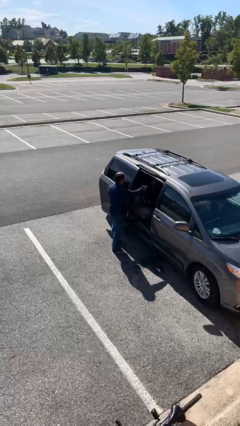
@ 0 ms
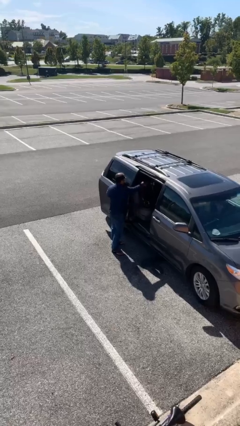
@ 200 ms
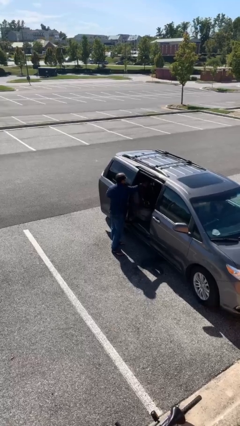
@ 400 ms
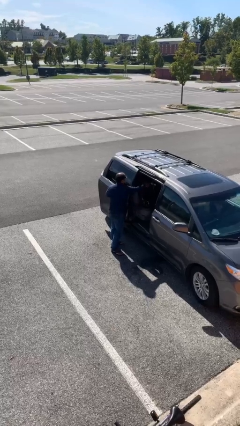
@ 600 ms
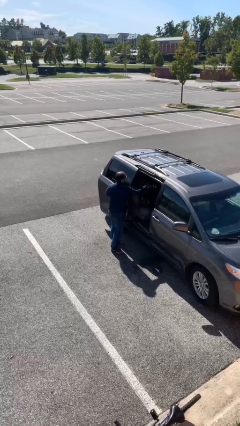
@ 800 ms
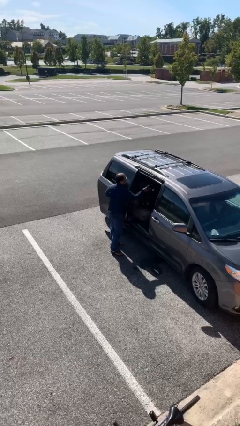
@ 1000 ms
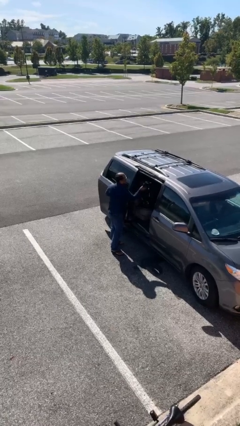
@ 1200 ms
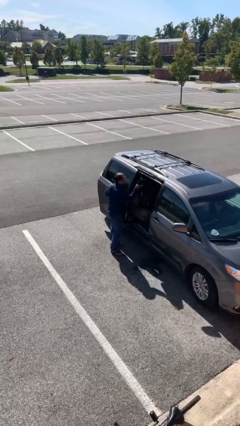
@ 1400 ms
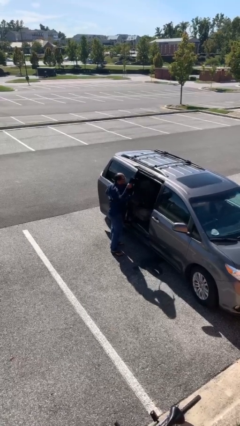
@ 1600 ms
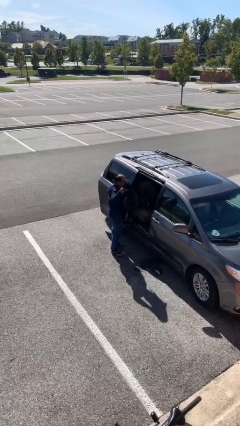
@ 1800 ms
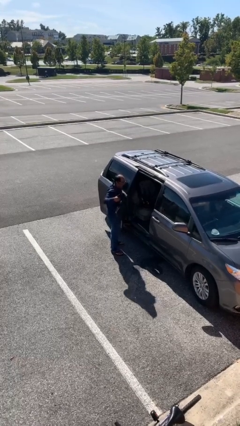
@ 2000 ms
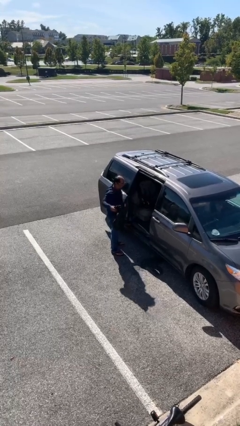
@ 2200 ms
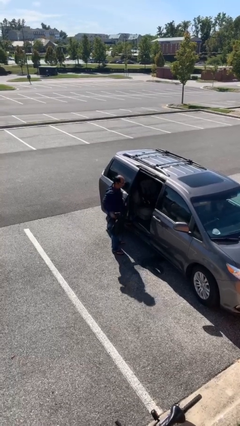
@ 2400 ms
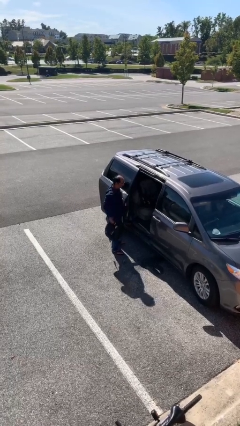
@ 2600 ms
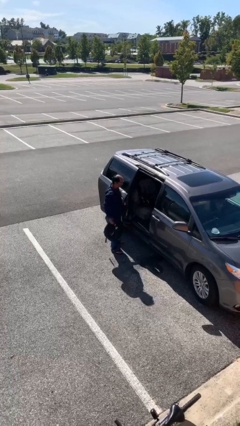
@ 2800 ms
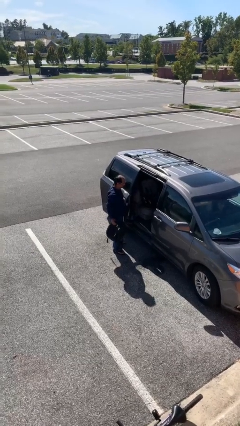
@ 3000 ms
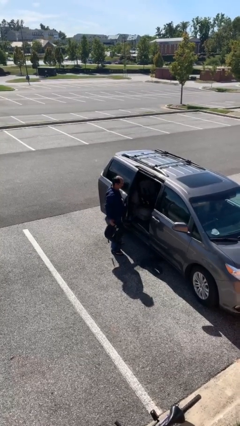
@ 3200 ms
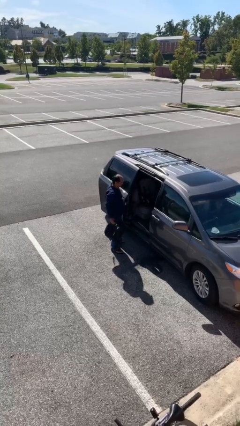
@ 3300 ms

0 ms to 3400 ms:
person unloads car

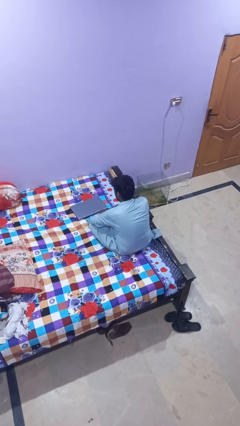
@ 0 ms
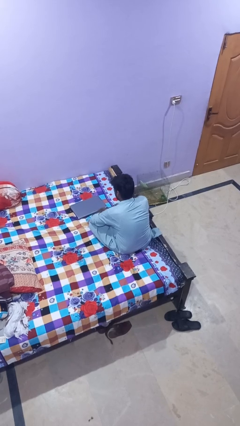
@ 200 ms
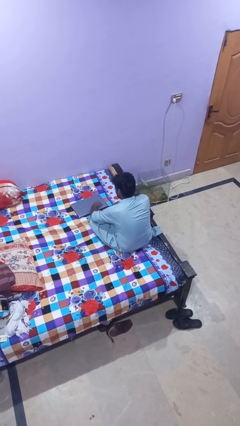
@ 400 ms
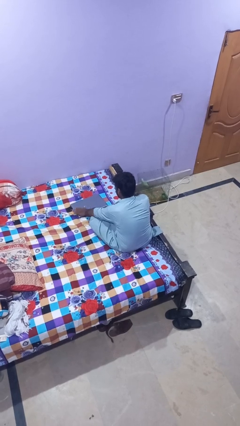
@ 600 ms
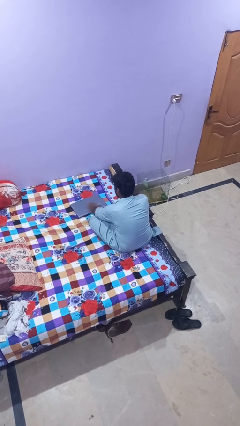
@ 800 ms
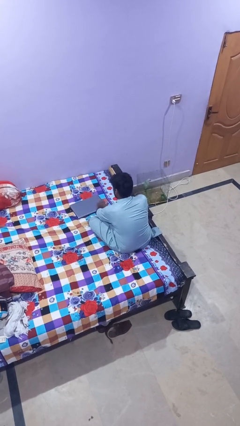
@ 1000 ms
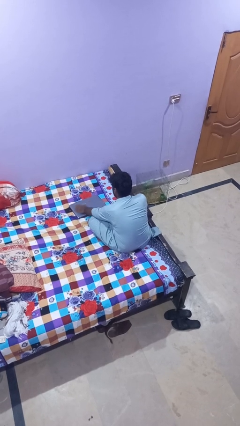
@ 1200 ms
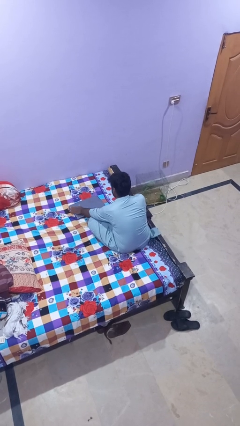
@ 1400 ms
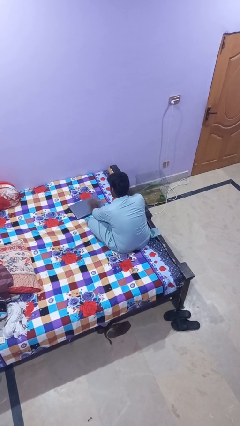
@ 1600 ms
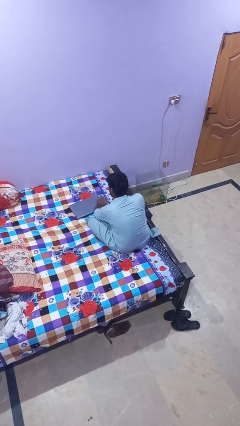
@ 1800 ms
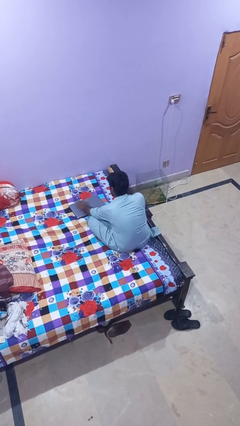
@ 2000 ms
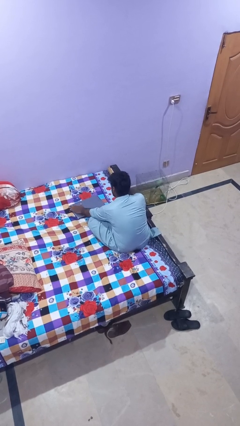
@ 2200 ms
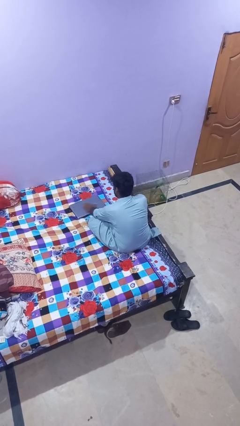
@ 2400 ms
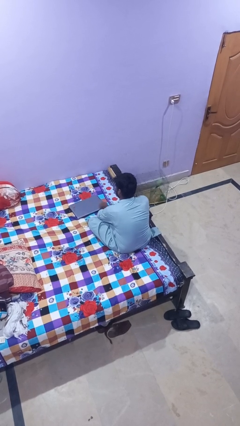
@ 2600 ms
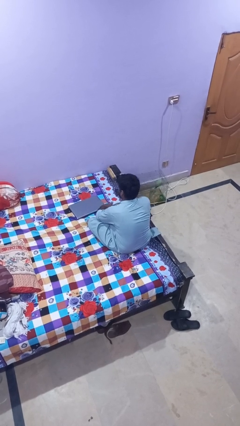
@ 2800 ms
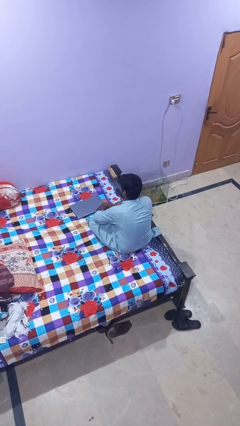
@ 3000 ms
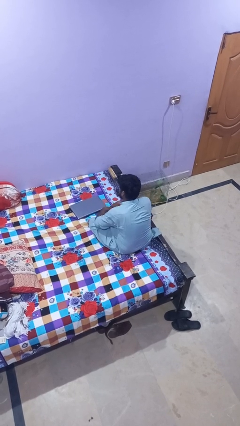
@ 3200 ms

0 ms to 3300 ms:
person waves hand over object

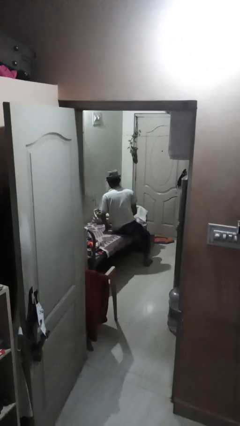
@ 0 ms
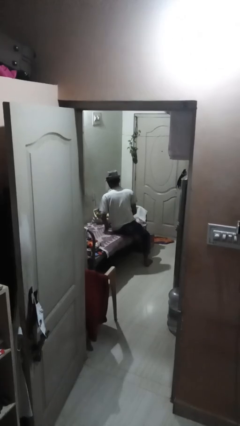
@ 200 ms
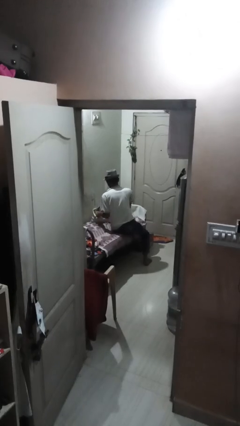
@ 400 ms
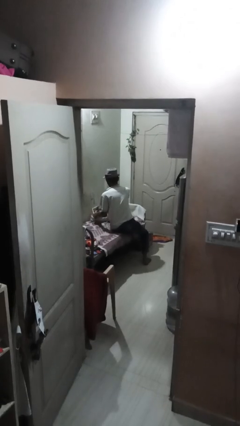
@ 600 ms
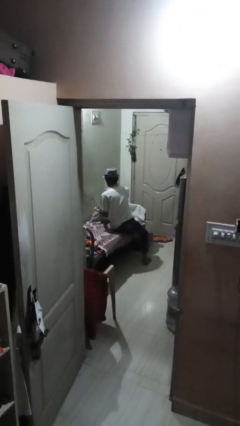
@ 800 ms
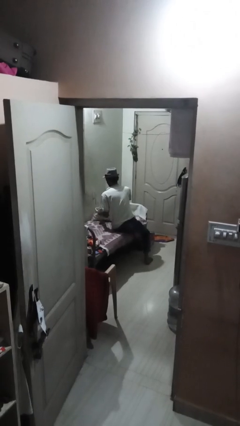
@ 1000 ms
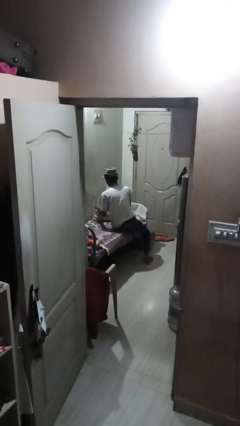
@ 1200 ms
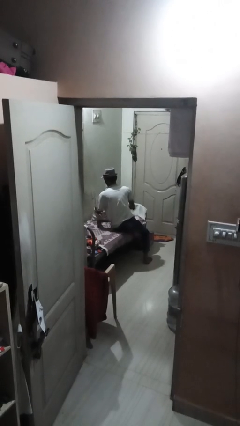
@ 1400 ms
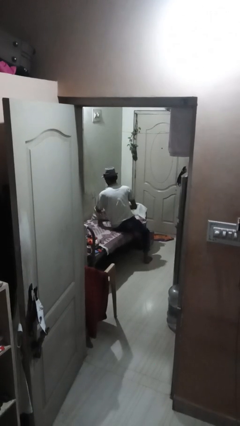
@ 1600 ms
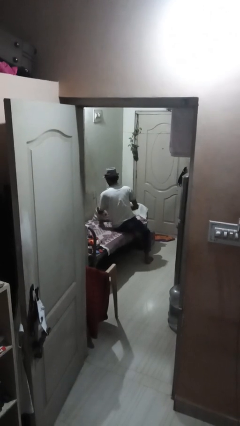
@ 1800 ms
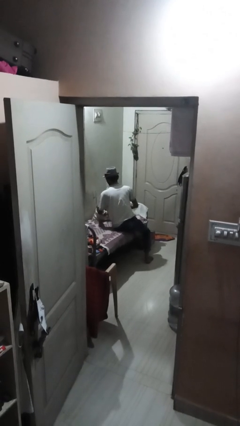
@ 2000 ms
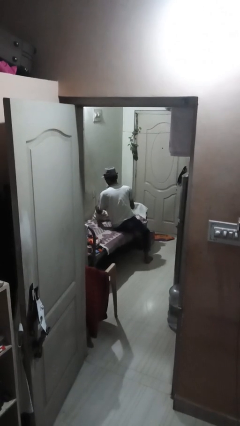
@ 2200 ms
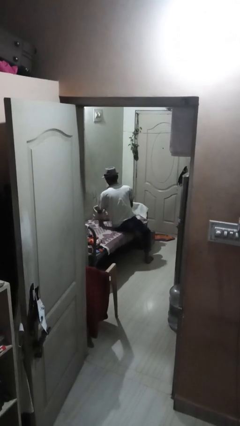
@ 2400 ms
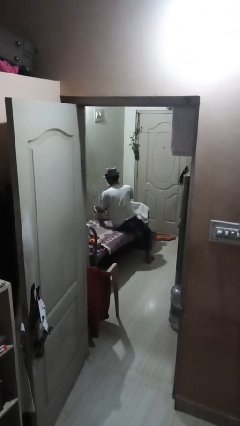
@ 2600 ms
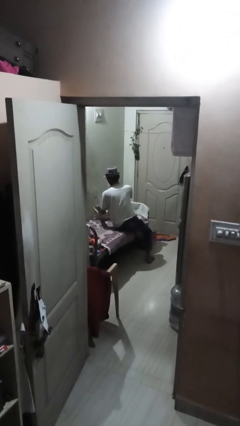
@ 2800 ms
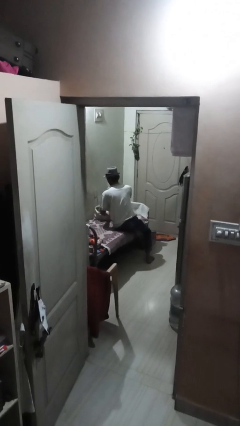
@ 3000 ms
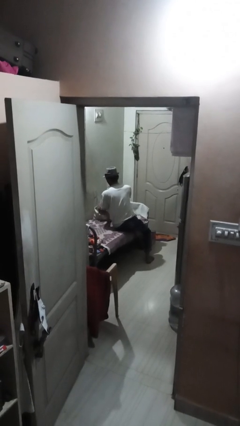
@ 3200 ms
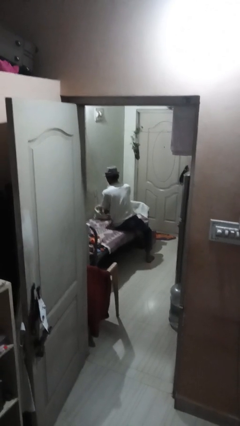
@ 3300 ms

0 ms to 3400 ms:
person searches in bag

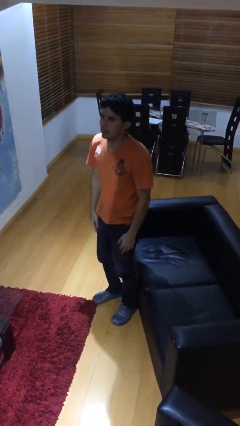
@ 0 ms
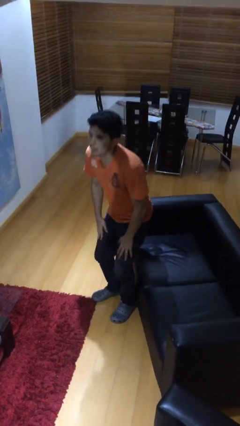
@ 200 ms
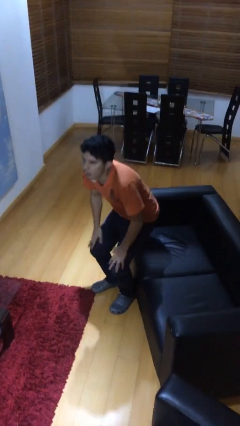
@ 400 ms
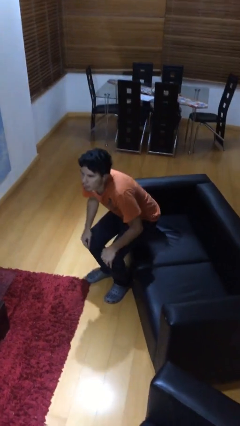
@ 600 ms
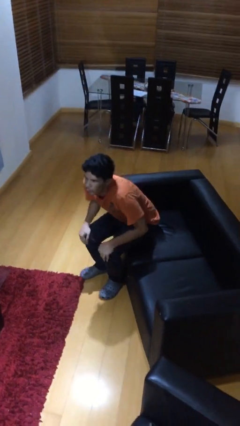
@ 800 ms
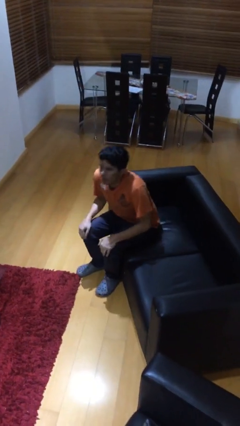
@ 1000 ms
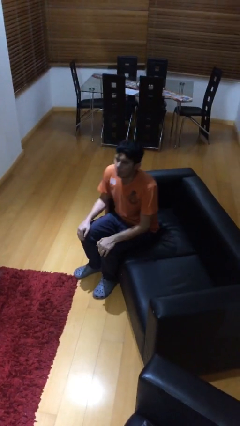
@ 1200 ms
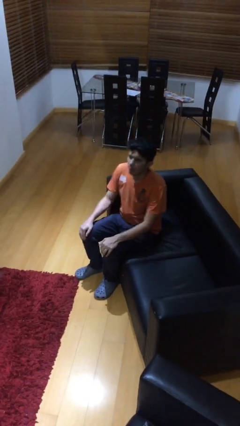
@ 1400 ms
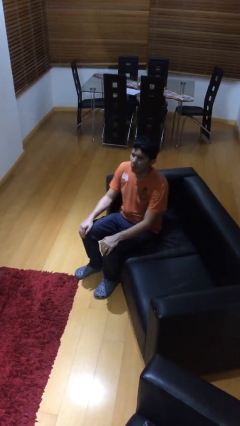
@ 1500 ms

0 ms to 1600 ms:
person sits down

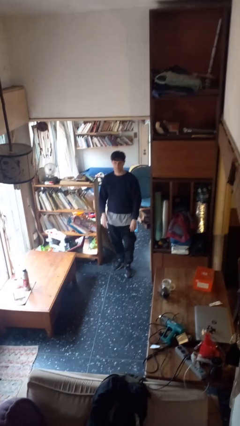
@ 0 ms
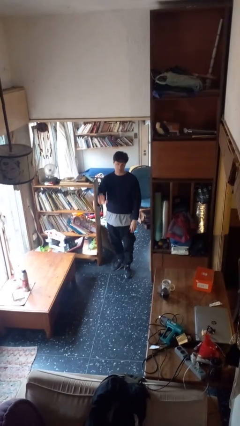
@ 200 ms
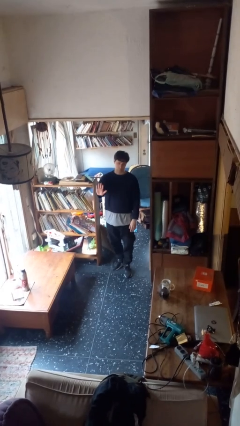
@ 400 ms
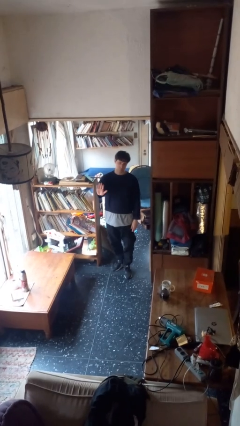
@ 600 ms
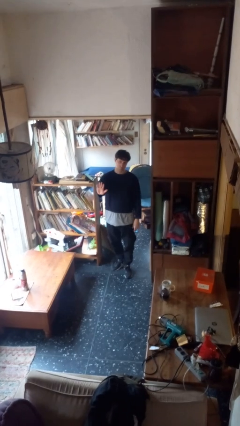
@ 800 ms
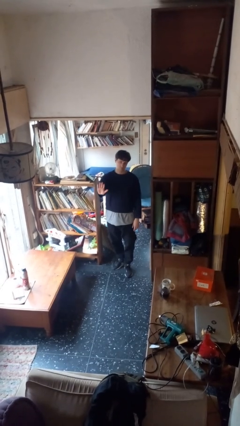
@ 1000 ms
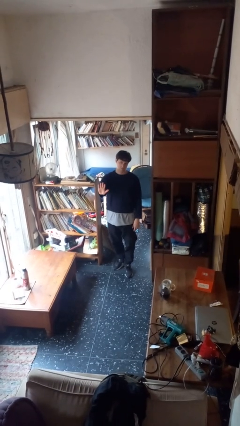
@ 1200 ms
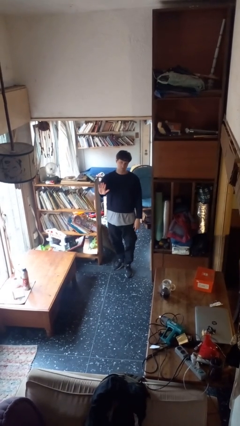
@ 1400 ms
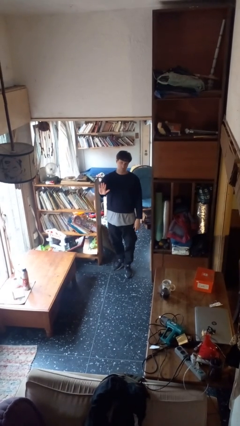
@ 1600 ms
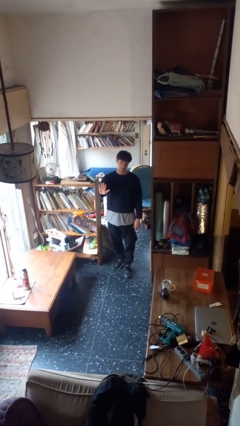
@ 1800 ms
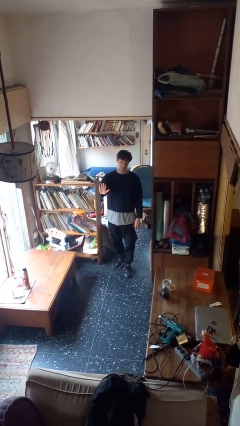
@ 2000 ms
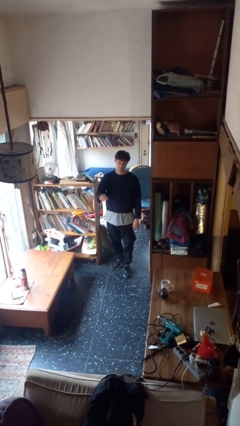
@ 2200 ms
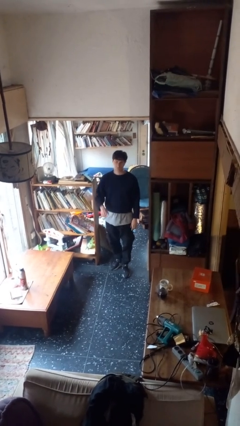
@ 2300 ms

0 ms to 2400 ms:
person gestures stop

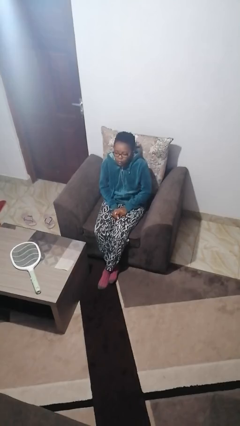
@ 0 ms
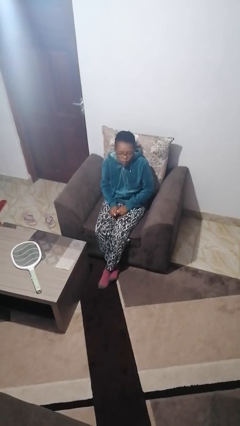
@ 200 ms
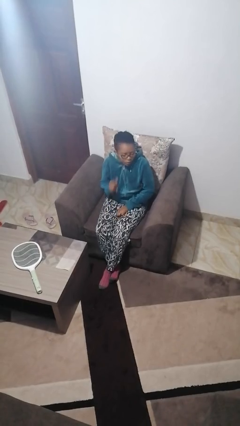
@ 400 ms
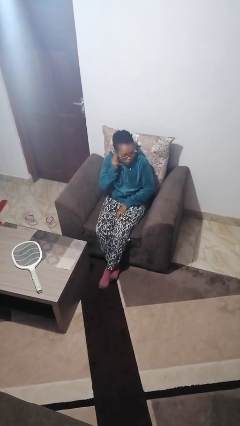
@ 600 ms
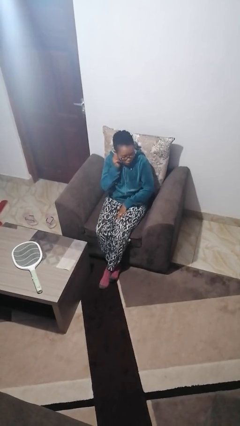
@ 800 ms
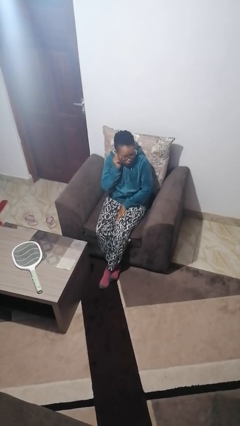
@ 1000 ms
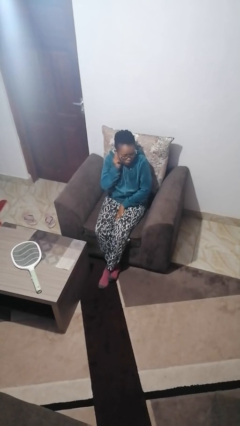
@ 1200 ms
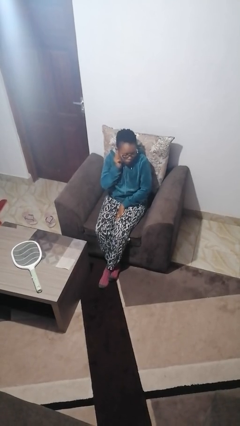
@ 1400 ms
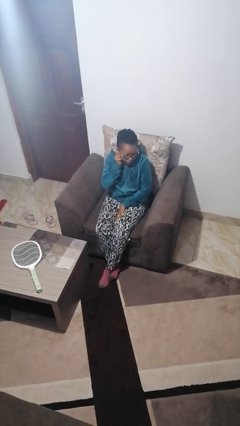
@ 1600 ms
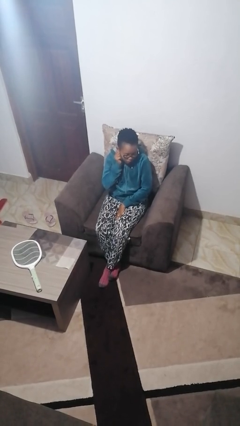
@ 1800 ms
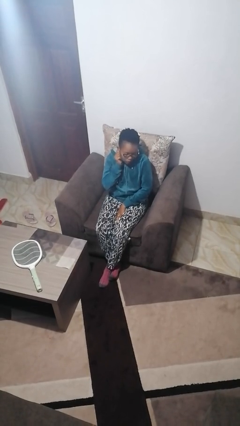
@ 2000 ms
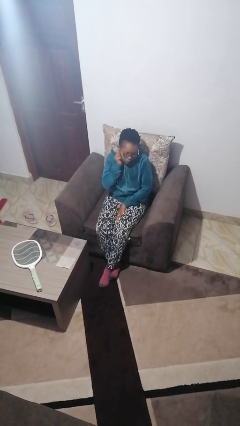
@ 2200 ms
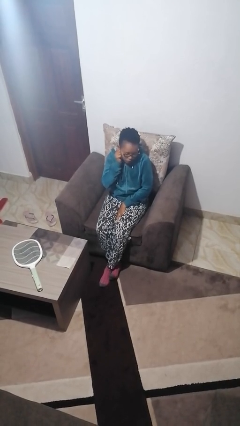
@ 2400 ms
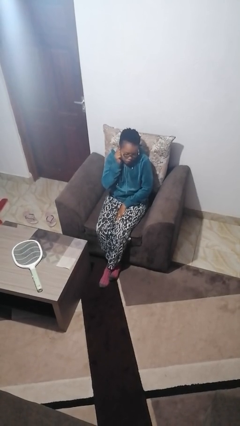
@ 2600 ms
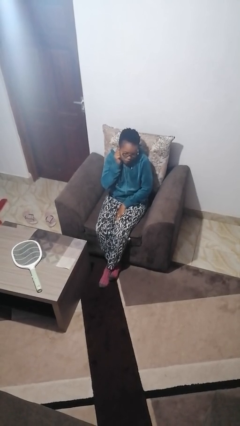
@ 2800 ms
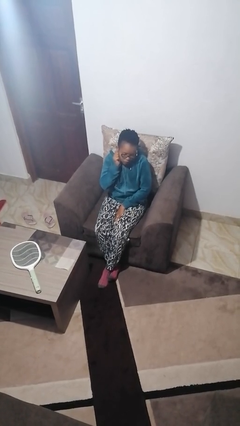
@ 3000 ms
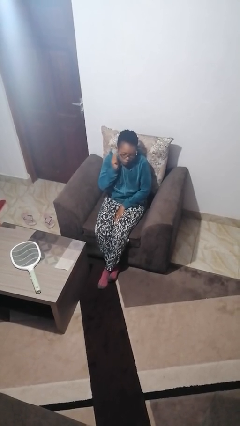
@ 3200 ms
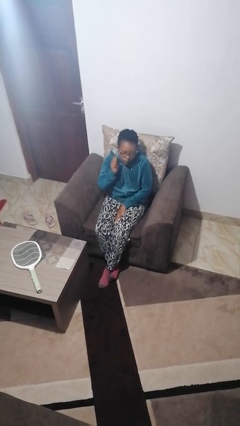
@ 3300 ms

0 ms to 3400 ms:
person touches earlobe
